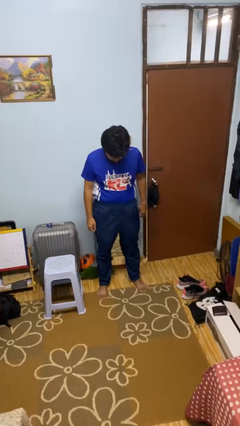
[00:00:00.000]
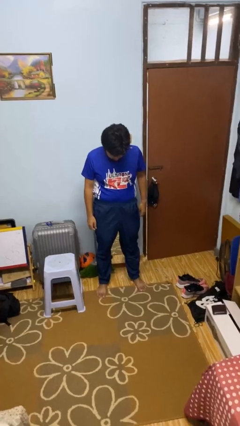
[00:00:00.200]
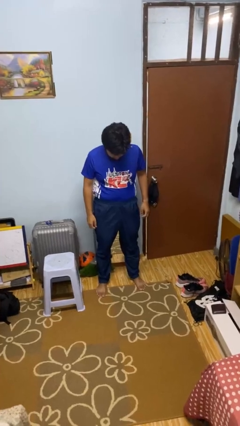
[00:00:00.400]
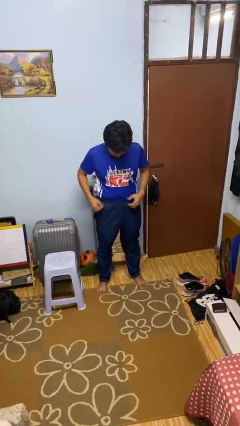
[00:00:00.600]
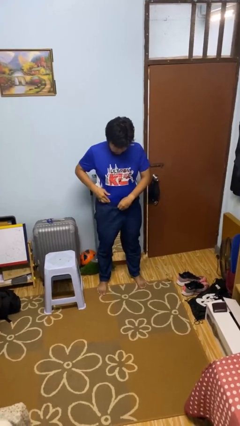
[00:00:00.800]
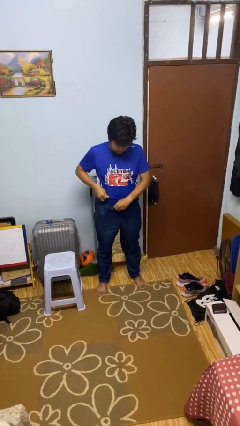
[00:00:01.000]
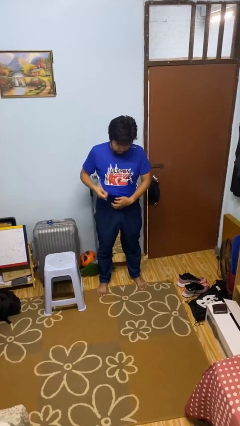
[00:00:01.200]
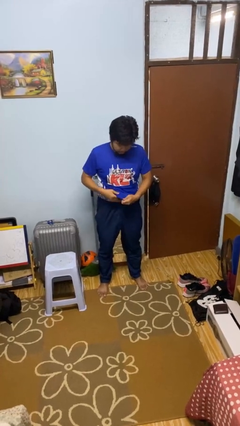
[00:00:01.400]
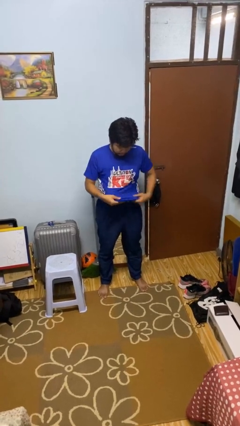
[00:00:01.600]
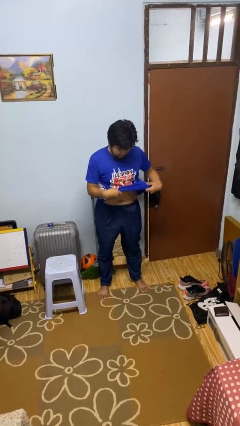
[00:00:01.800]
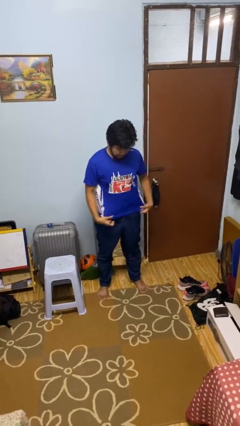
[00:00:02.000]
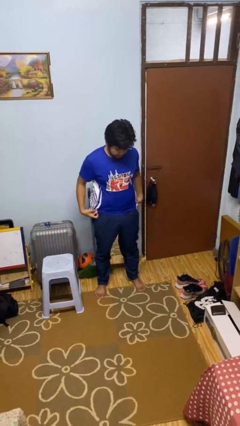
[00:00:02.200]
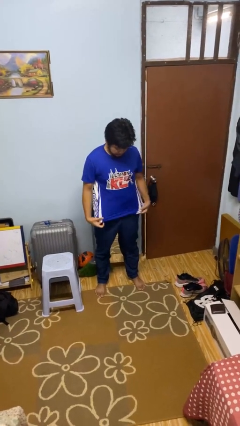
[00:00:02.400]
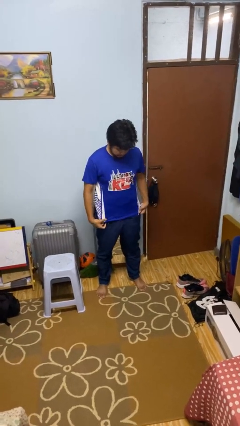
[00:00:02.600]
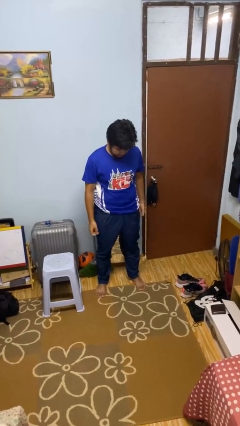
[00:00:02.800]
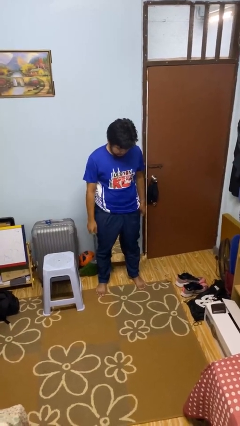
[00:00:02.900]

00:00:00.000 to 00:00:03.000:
person untucks shirt

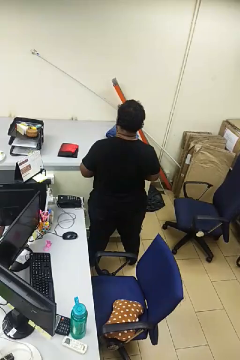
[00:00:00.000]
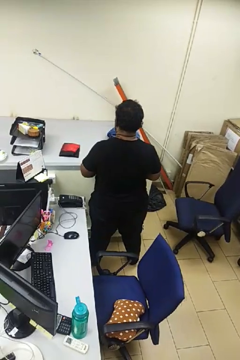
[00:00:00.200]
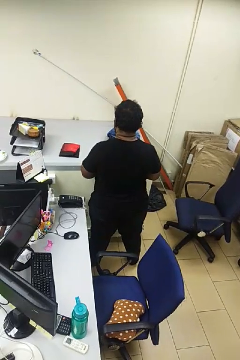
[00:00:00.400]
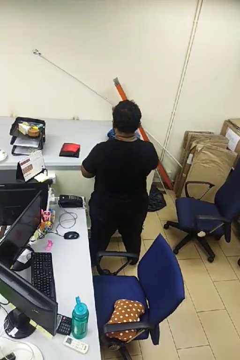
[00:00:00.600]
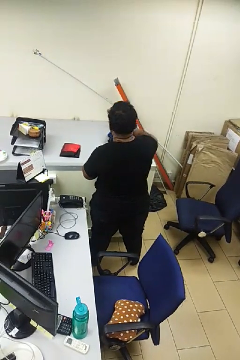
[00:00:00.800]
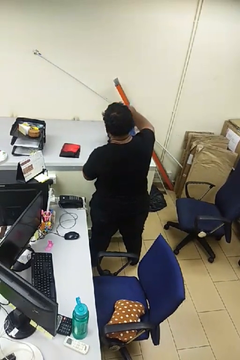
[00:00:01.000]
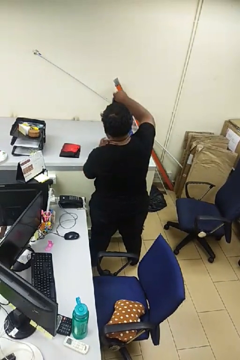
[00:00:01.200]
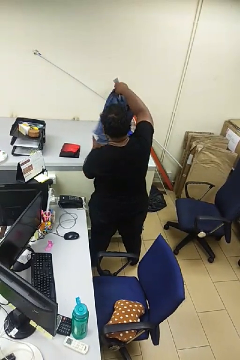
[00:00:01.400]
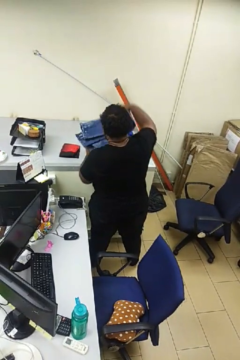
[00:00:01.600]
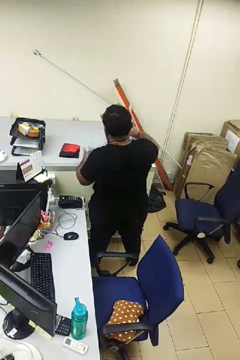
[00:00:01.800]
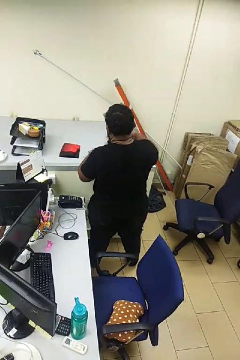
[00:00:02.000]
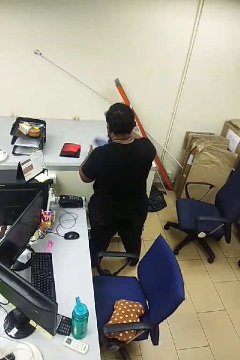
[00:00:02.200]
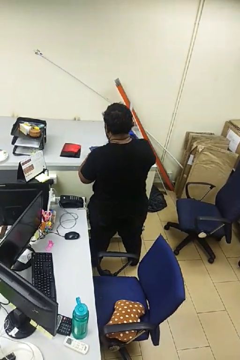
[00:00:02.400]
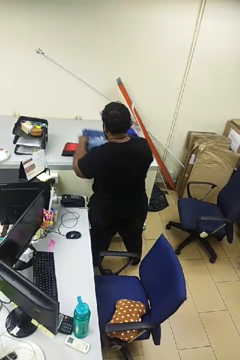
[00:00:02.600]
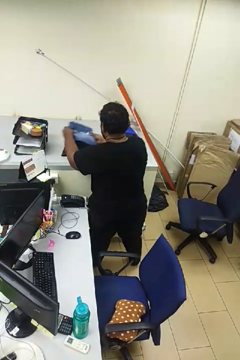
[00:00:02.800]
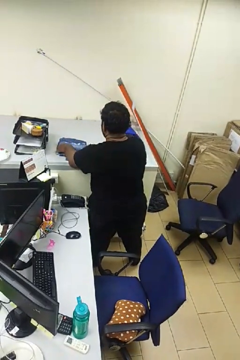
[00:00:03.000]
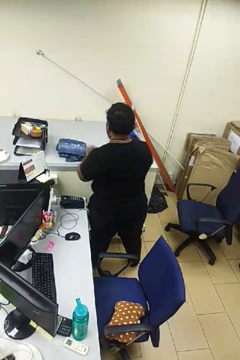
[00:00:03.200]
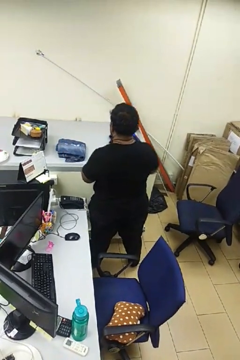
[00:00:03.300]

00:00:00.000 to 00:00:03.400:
person folds pants

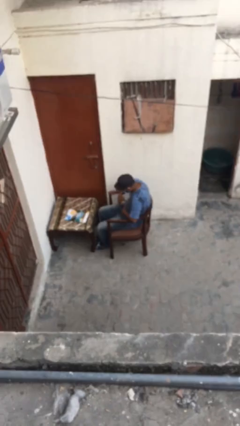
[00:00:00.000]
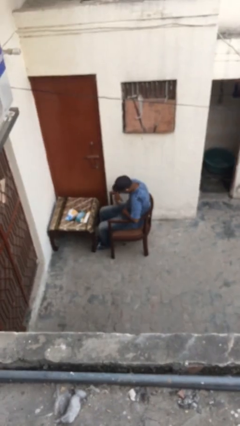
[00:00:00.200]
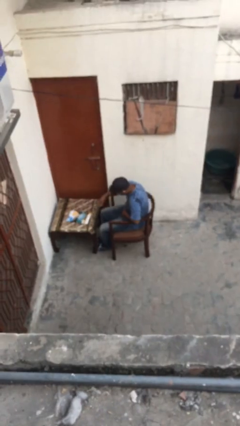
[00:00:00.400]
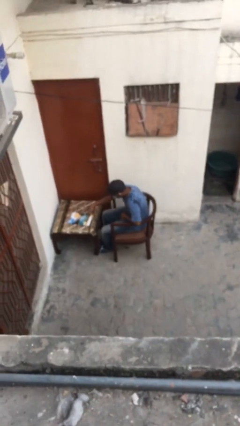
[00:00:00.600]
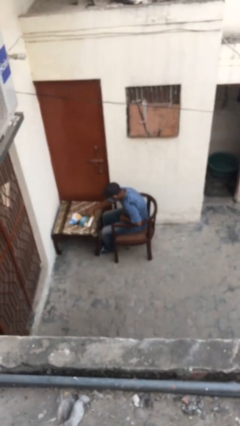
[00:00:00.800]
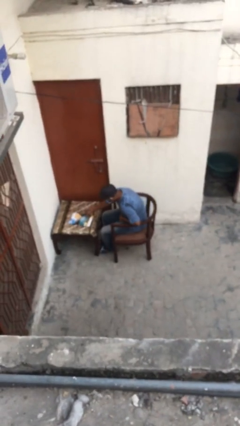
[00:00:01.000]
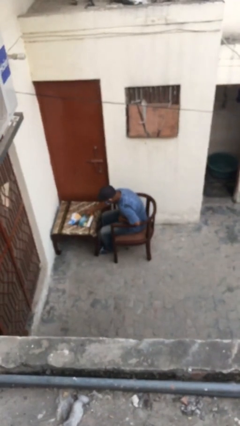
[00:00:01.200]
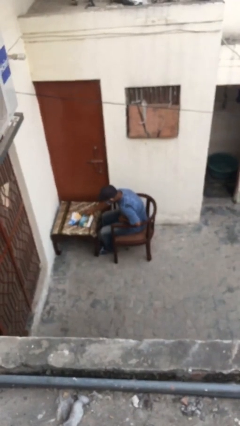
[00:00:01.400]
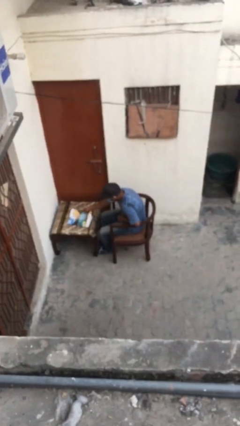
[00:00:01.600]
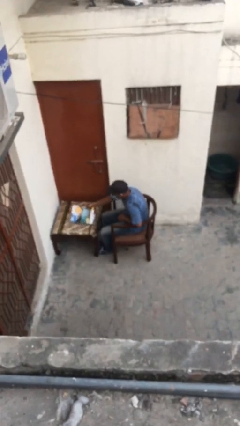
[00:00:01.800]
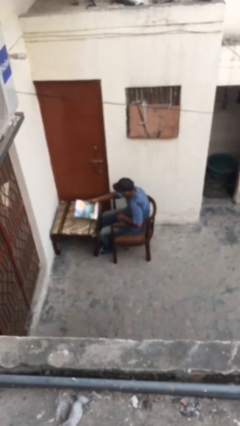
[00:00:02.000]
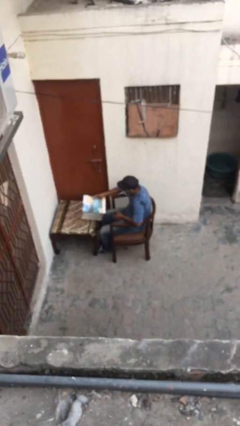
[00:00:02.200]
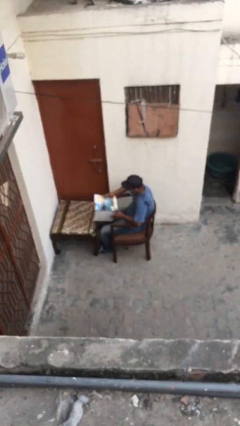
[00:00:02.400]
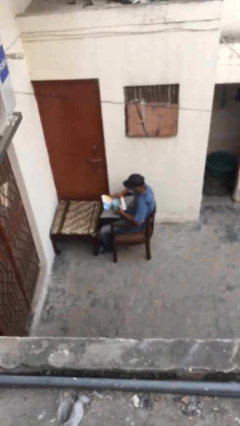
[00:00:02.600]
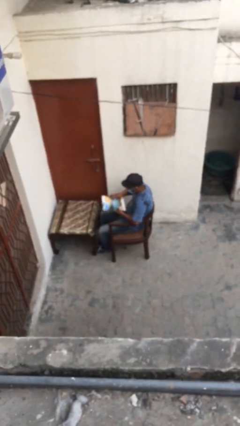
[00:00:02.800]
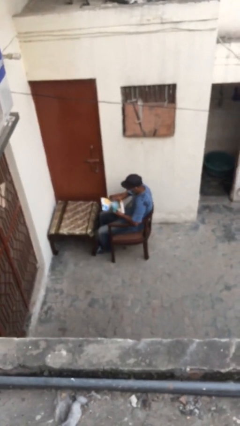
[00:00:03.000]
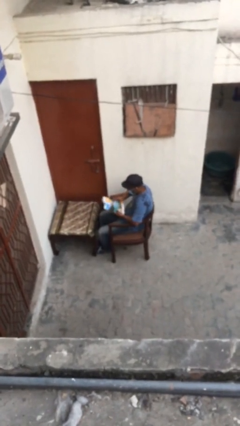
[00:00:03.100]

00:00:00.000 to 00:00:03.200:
person picks up object from table

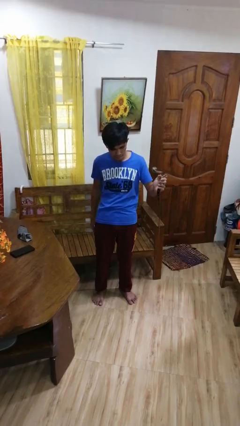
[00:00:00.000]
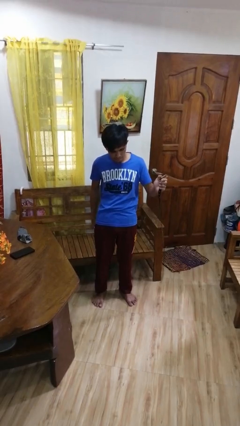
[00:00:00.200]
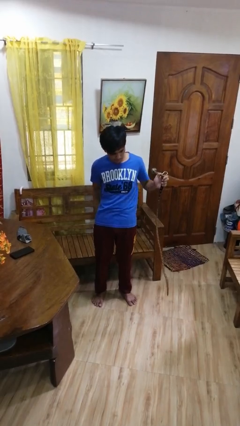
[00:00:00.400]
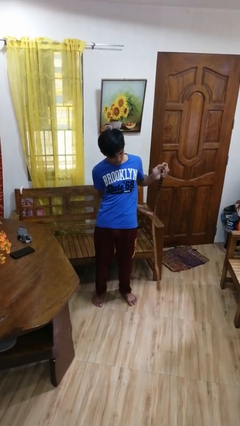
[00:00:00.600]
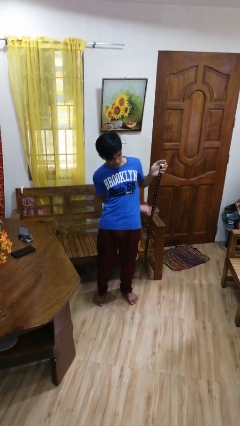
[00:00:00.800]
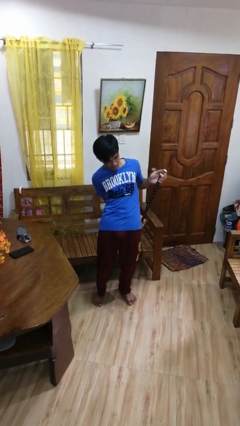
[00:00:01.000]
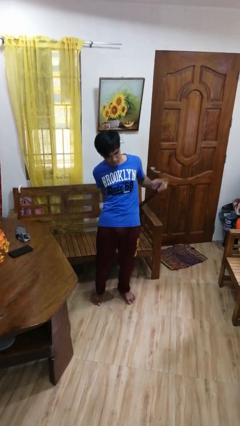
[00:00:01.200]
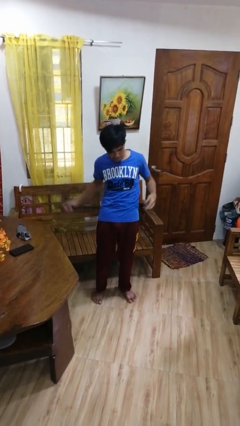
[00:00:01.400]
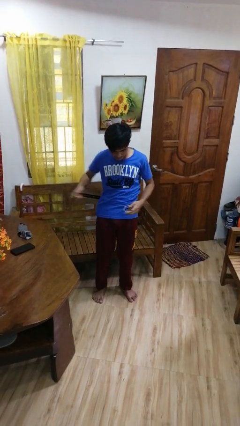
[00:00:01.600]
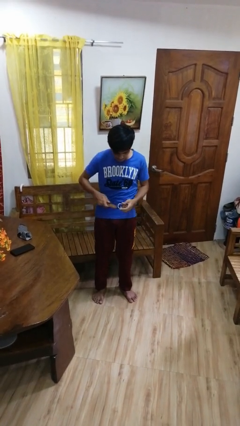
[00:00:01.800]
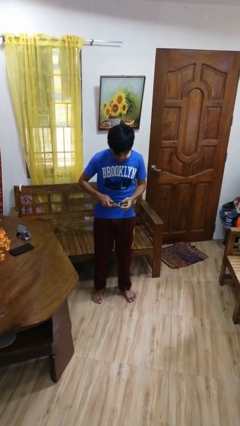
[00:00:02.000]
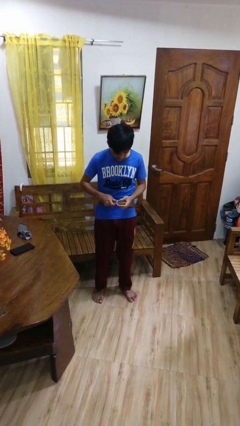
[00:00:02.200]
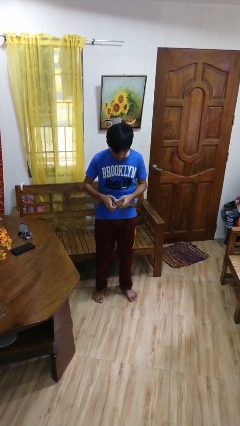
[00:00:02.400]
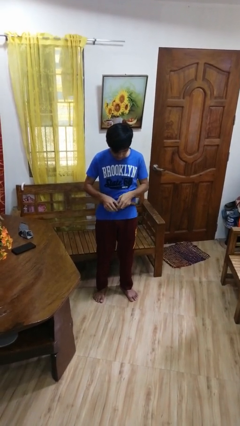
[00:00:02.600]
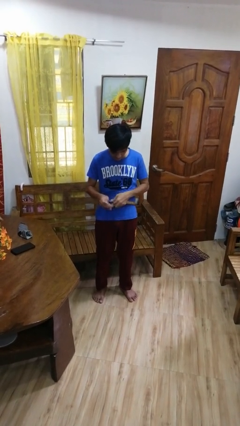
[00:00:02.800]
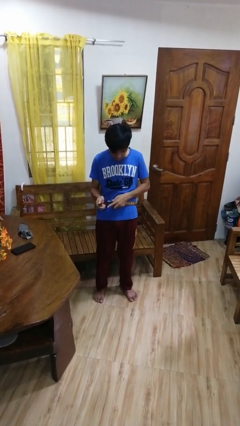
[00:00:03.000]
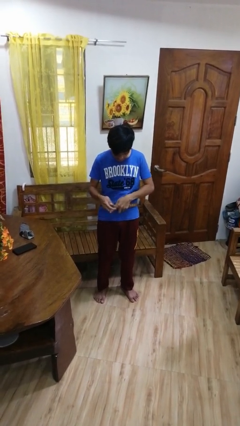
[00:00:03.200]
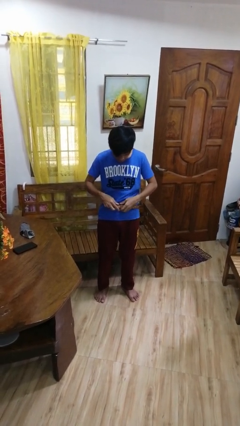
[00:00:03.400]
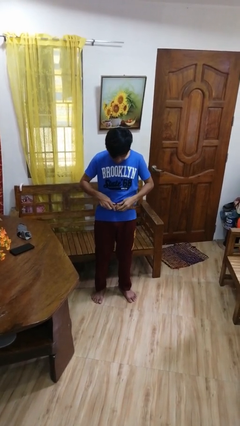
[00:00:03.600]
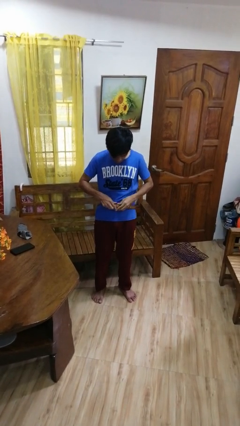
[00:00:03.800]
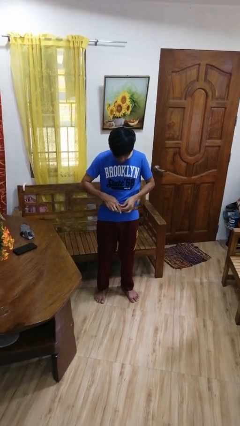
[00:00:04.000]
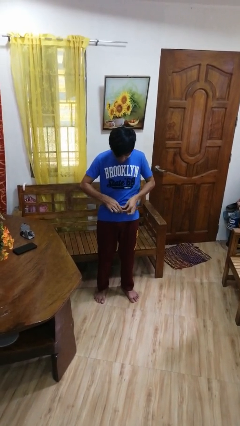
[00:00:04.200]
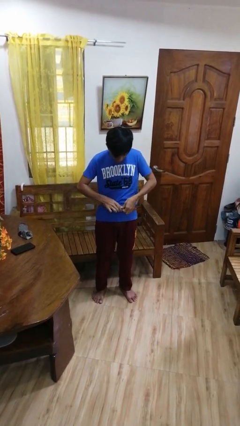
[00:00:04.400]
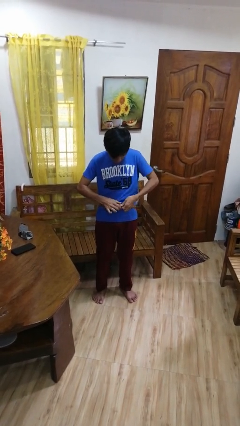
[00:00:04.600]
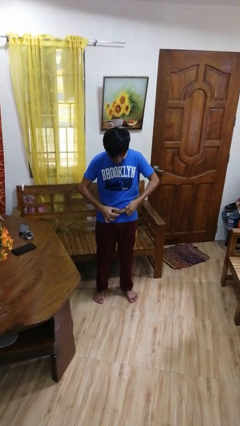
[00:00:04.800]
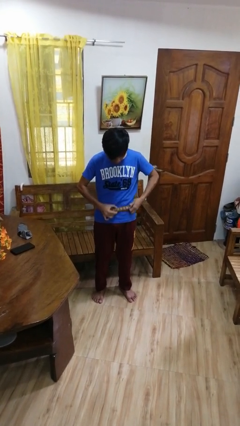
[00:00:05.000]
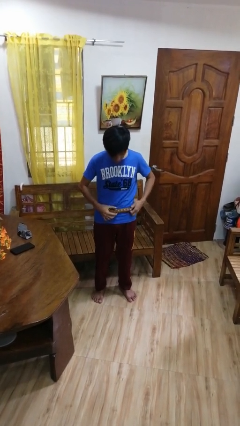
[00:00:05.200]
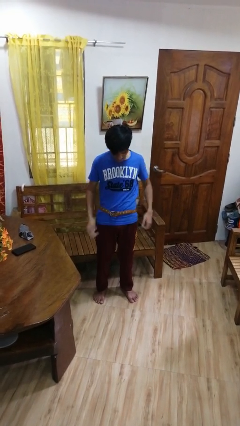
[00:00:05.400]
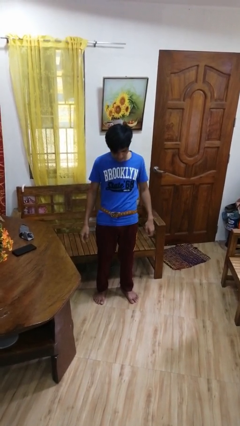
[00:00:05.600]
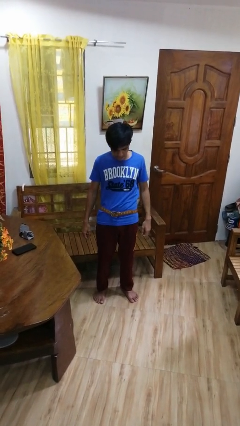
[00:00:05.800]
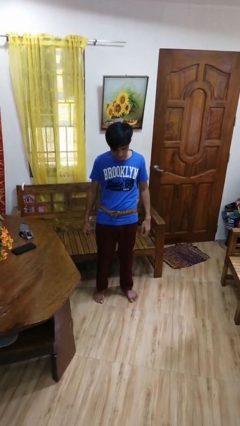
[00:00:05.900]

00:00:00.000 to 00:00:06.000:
person puts on belt

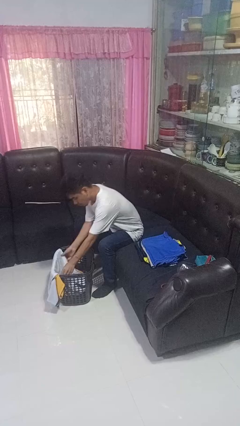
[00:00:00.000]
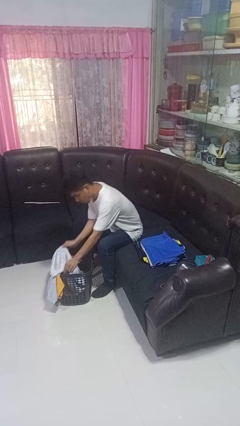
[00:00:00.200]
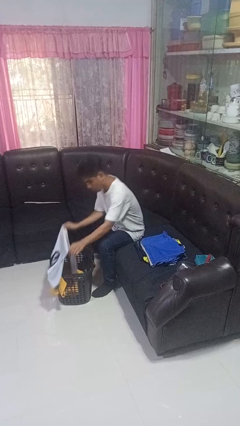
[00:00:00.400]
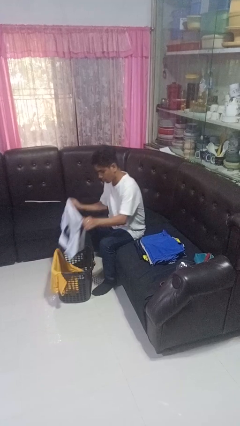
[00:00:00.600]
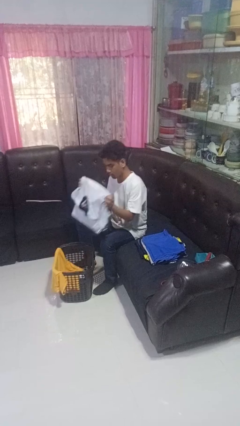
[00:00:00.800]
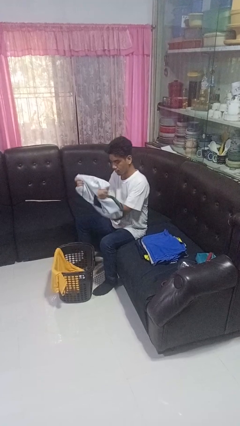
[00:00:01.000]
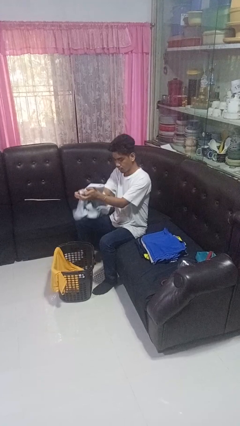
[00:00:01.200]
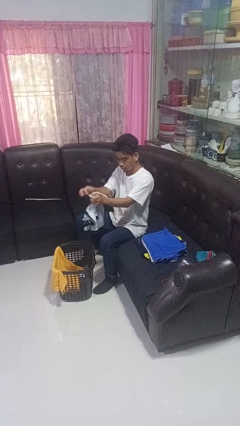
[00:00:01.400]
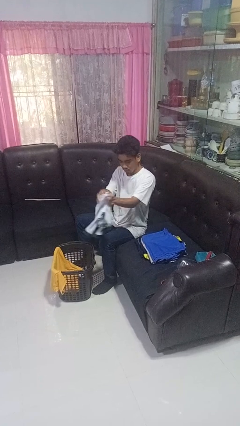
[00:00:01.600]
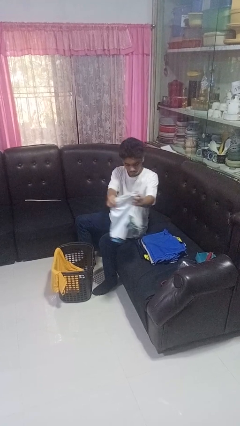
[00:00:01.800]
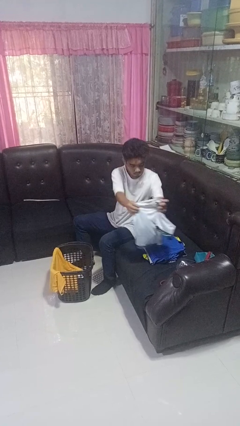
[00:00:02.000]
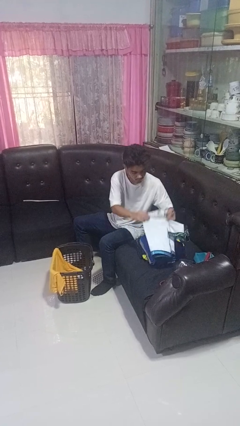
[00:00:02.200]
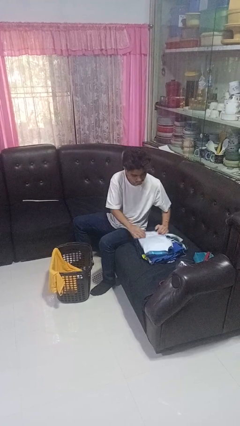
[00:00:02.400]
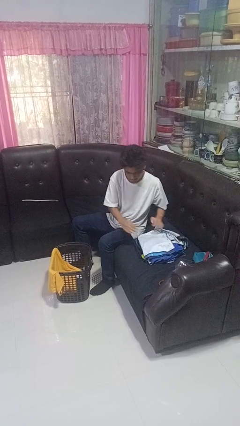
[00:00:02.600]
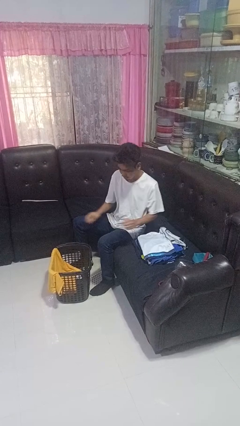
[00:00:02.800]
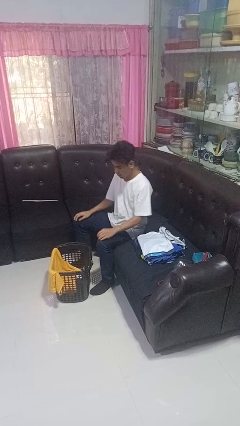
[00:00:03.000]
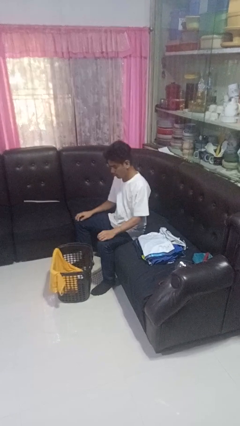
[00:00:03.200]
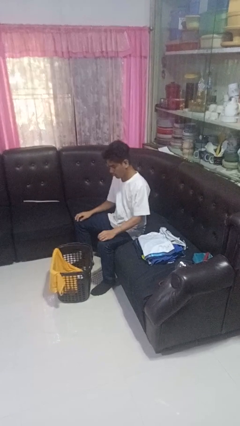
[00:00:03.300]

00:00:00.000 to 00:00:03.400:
person folds shirt
